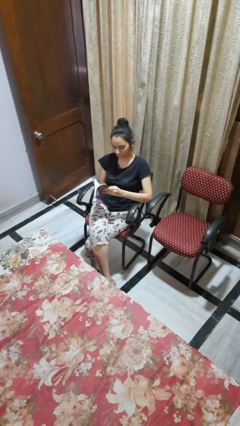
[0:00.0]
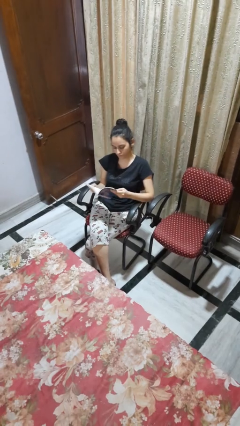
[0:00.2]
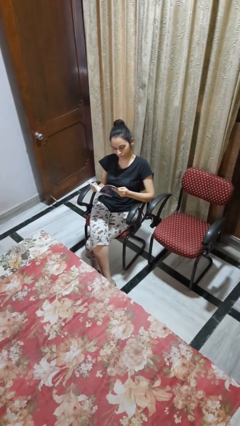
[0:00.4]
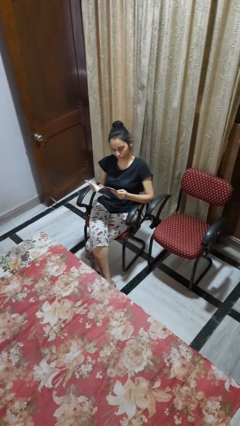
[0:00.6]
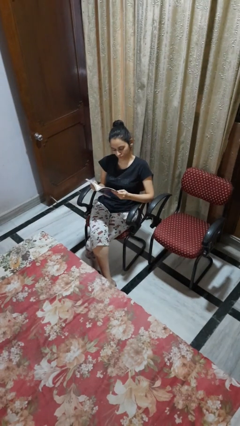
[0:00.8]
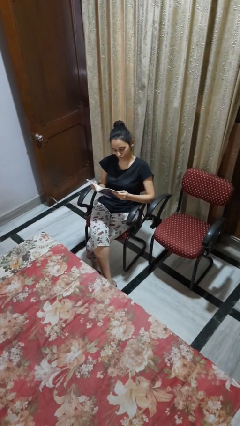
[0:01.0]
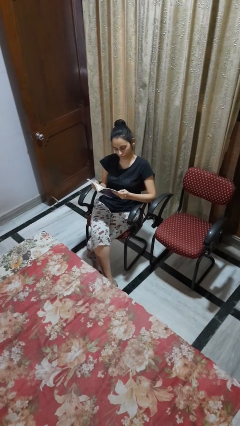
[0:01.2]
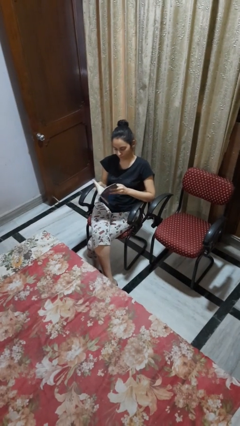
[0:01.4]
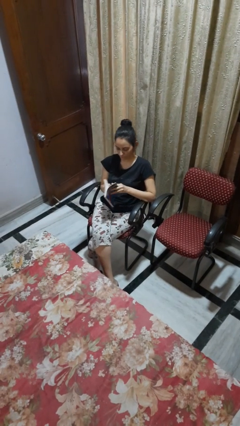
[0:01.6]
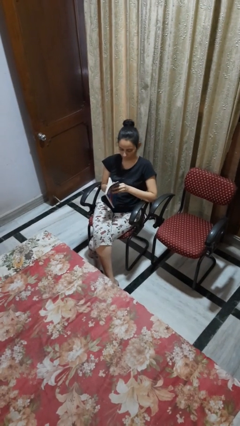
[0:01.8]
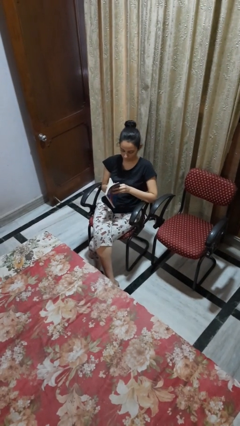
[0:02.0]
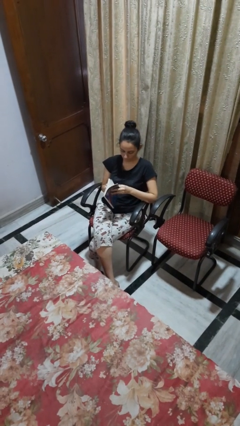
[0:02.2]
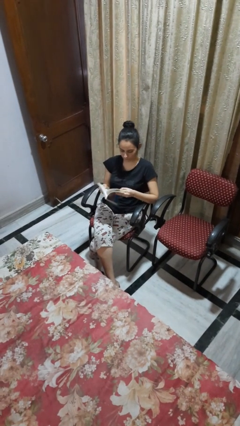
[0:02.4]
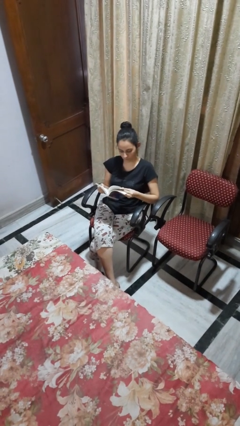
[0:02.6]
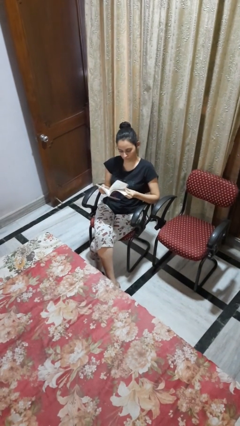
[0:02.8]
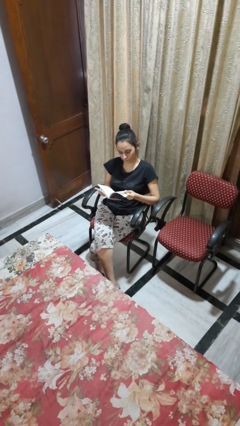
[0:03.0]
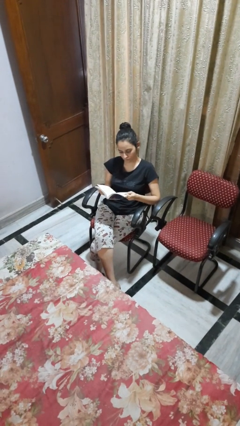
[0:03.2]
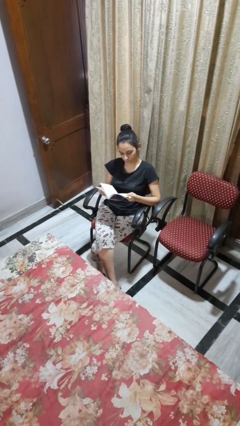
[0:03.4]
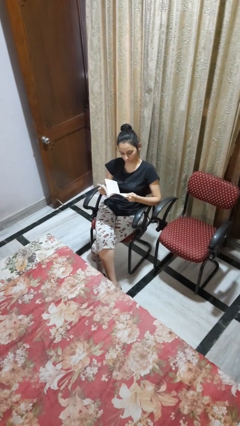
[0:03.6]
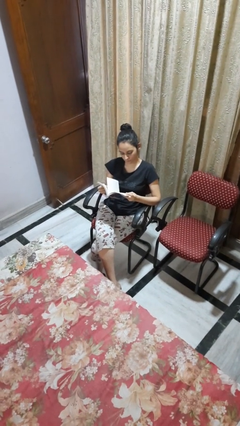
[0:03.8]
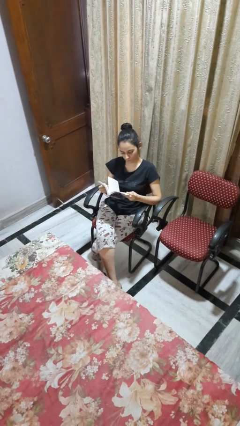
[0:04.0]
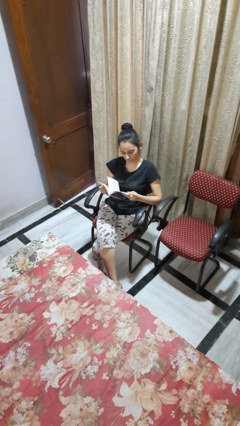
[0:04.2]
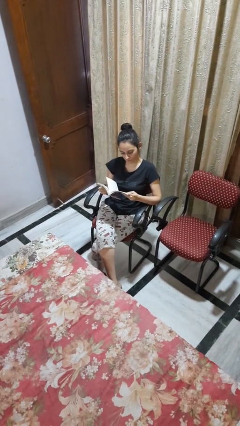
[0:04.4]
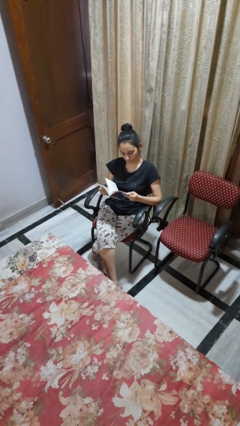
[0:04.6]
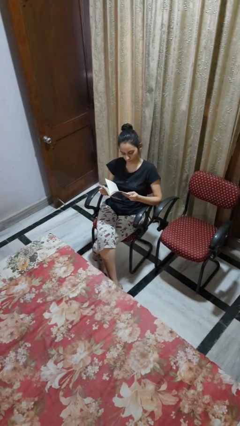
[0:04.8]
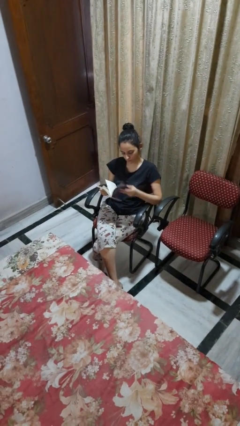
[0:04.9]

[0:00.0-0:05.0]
person reads book

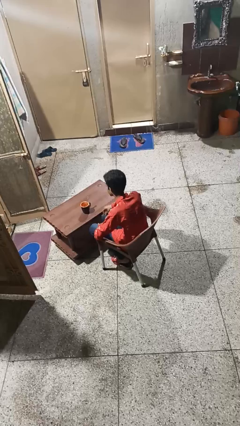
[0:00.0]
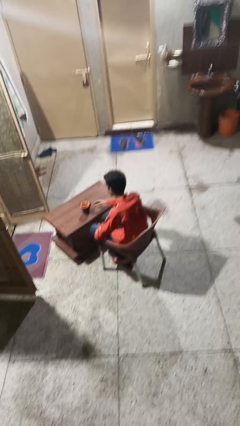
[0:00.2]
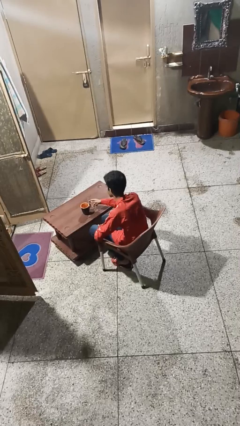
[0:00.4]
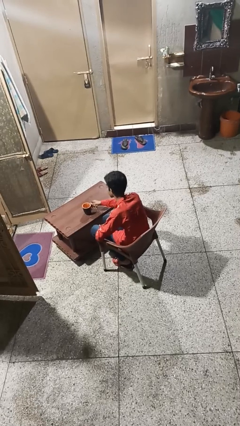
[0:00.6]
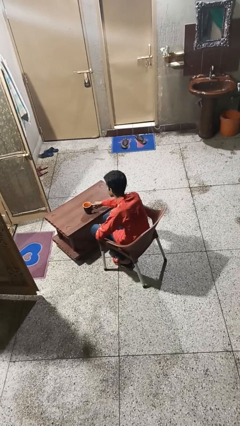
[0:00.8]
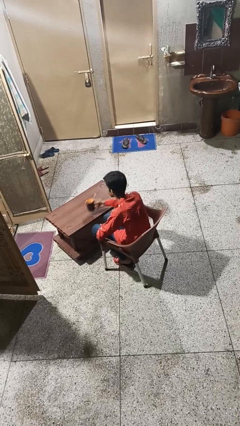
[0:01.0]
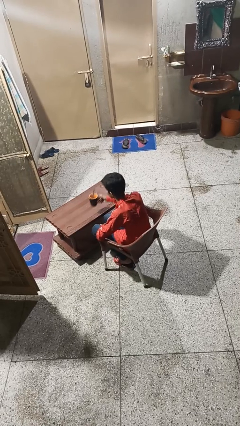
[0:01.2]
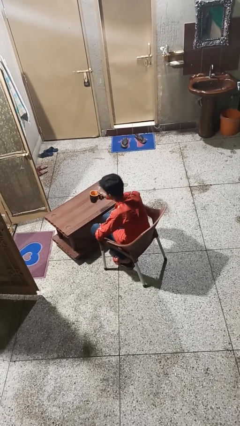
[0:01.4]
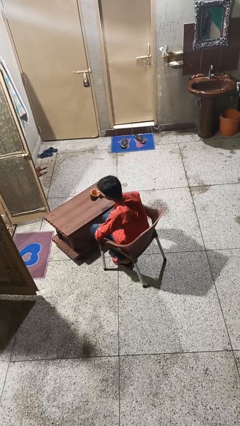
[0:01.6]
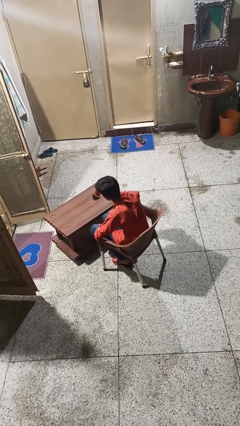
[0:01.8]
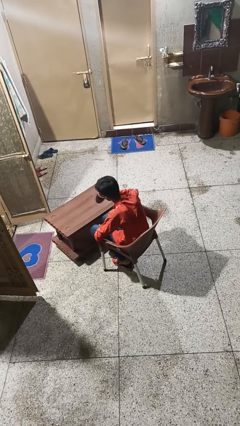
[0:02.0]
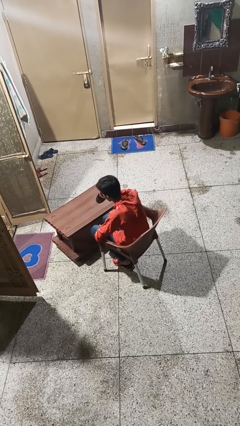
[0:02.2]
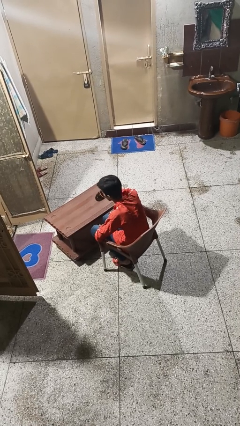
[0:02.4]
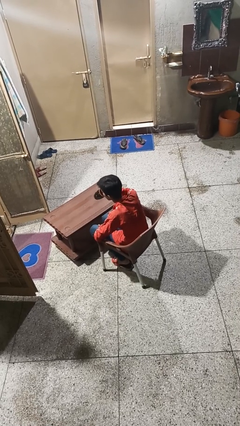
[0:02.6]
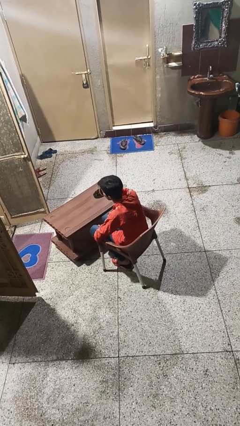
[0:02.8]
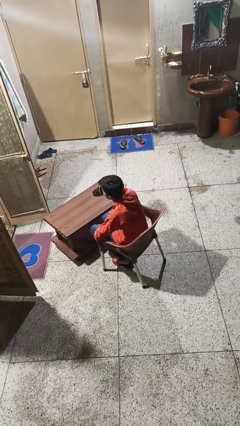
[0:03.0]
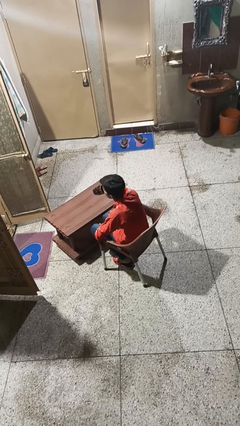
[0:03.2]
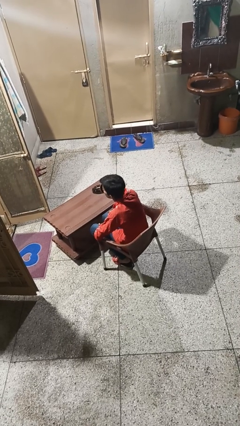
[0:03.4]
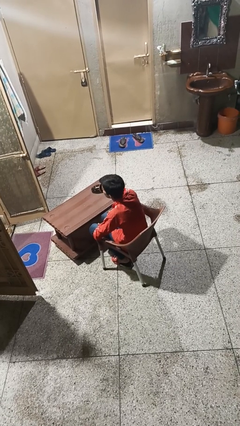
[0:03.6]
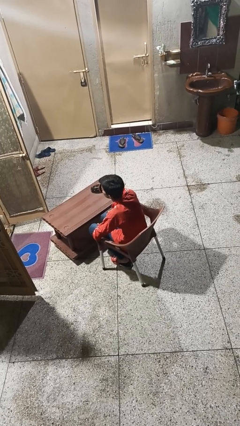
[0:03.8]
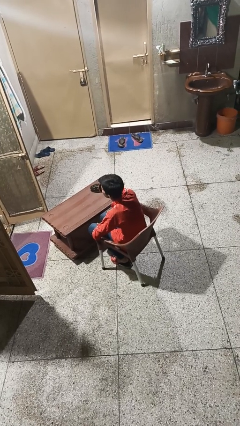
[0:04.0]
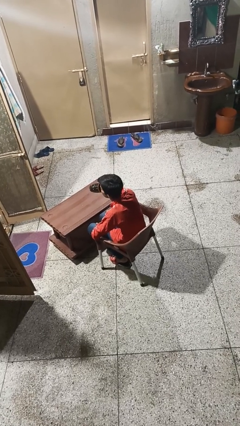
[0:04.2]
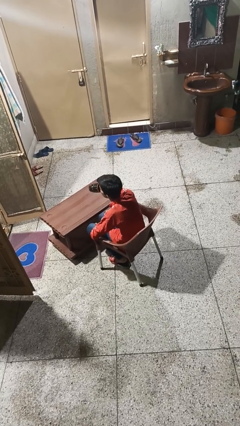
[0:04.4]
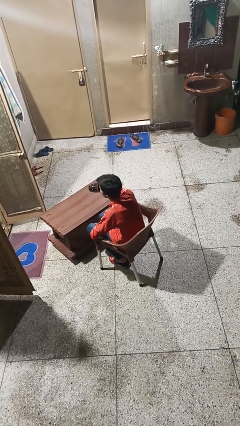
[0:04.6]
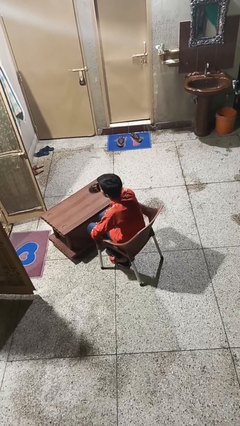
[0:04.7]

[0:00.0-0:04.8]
person drinks from mug

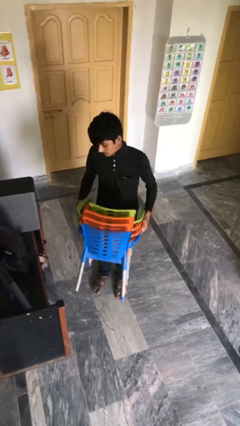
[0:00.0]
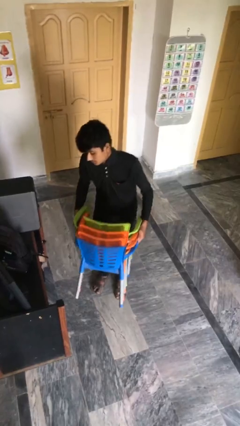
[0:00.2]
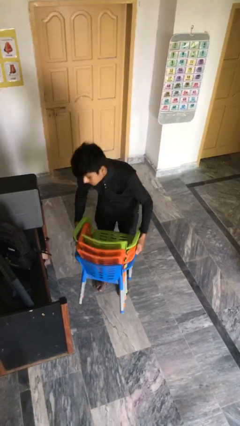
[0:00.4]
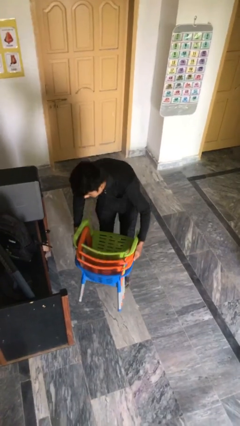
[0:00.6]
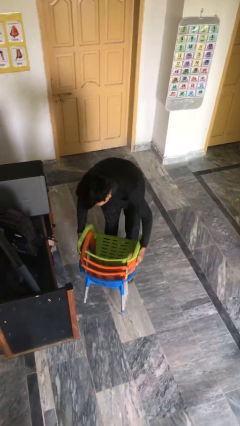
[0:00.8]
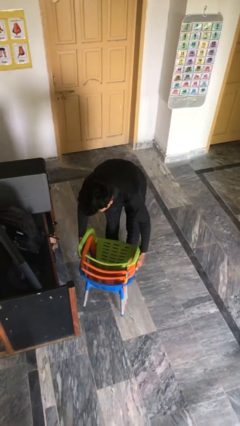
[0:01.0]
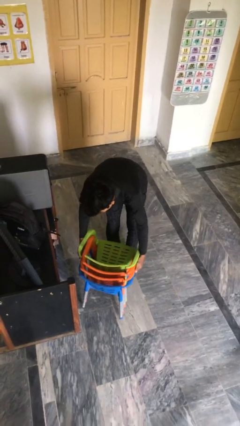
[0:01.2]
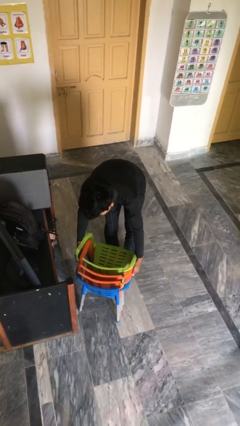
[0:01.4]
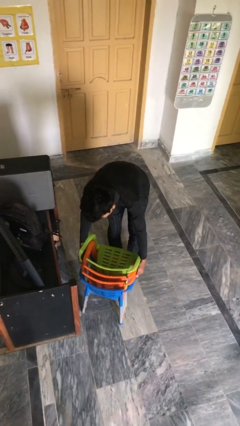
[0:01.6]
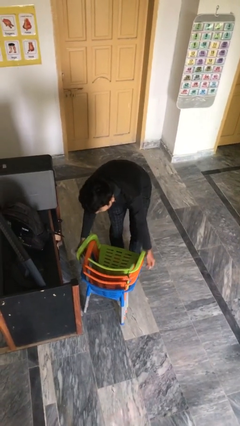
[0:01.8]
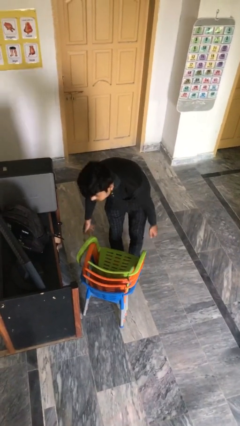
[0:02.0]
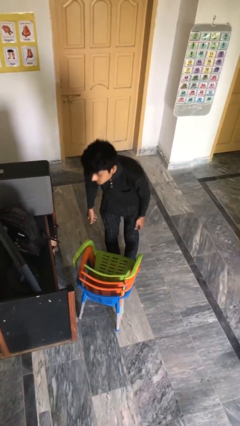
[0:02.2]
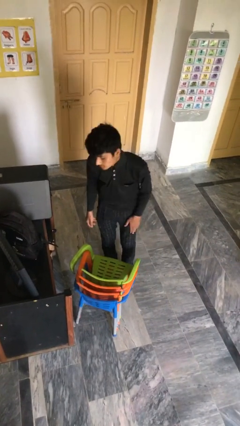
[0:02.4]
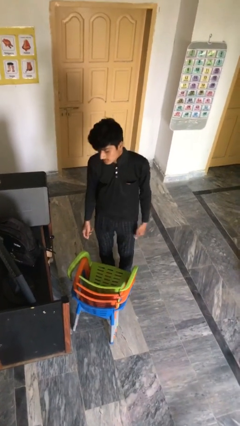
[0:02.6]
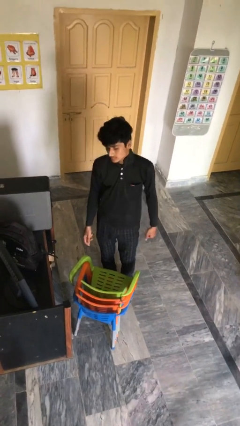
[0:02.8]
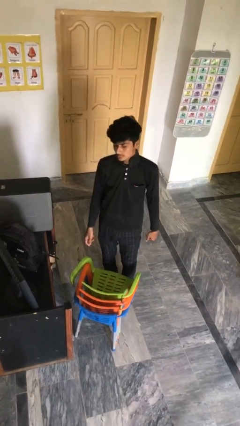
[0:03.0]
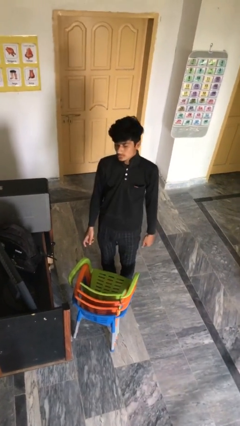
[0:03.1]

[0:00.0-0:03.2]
person puts down object on floor

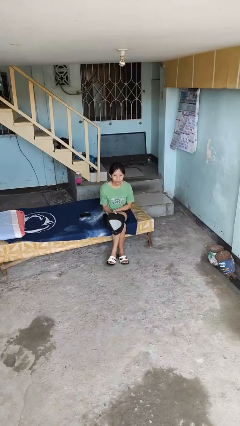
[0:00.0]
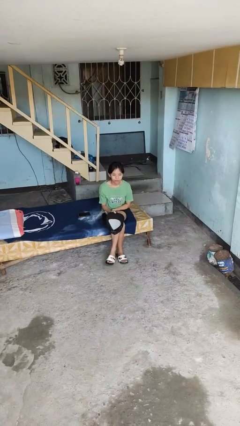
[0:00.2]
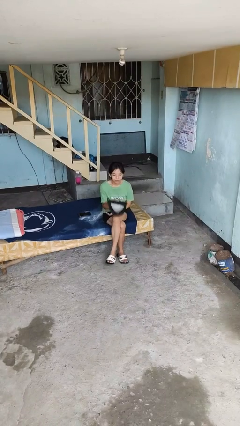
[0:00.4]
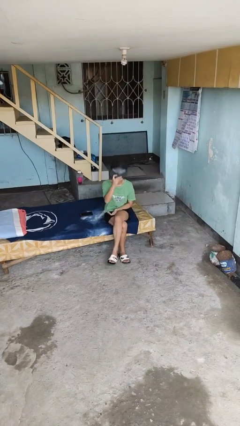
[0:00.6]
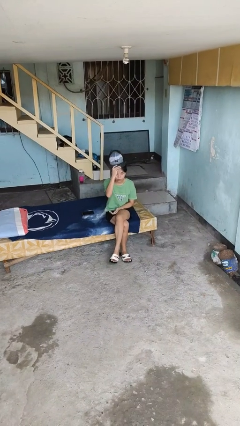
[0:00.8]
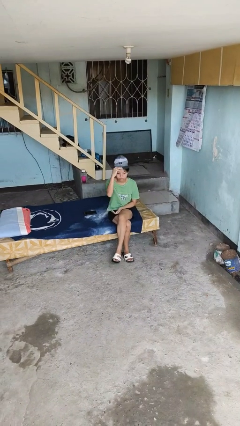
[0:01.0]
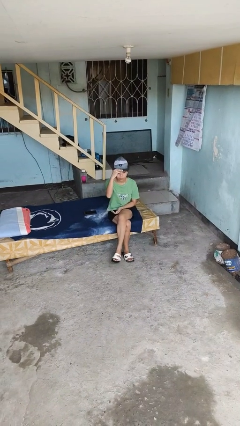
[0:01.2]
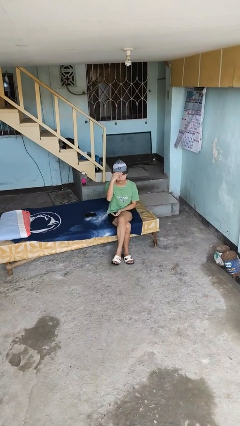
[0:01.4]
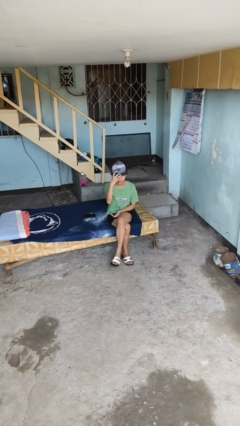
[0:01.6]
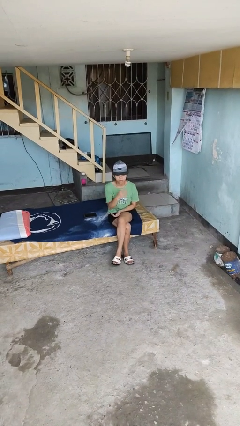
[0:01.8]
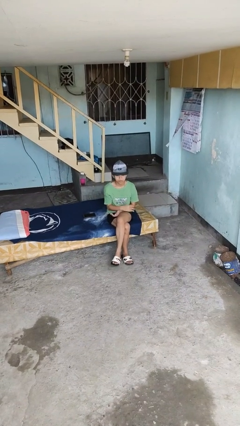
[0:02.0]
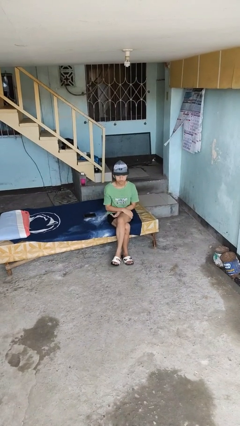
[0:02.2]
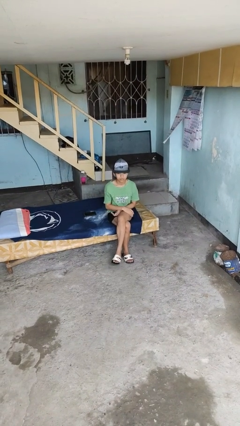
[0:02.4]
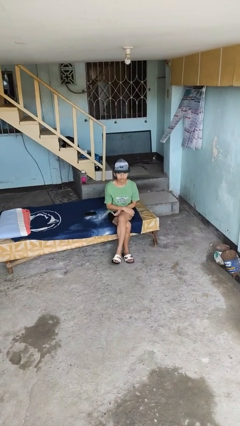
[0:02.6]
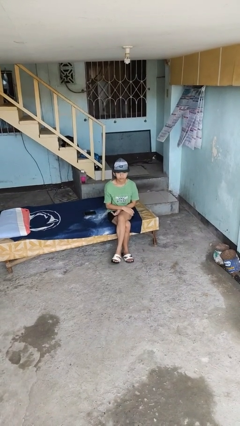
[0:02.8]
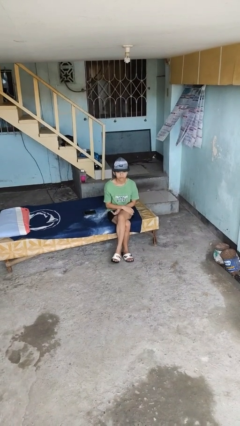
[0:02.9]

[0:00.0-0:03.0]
person puts on hat

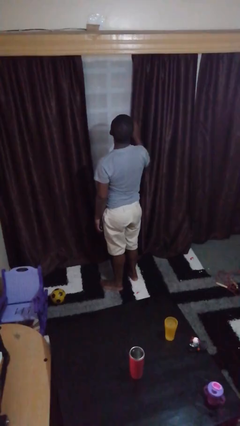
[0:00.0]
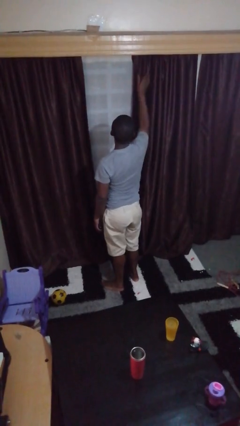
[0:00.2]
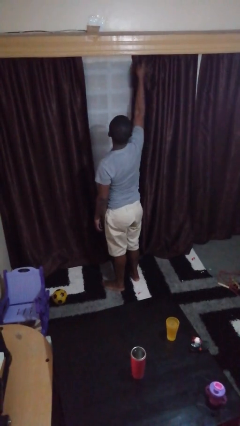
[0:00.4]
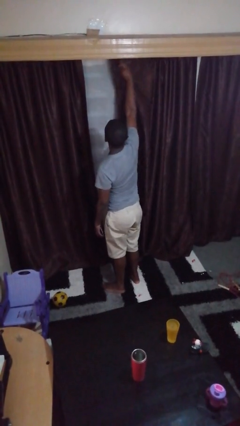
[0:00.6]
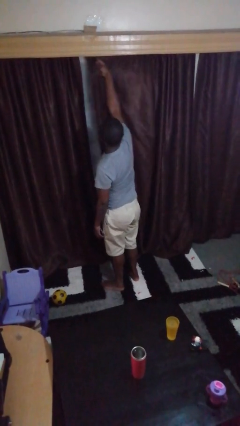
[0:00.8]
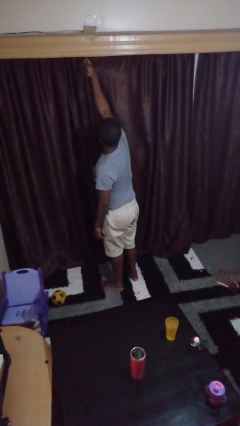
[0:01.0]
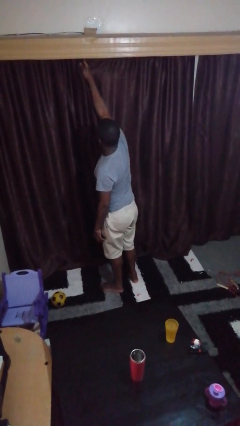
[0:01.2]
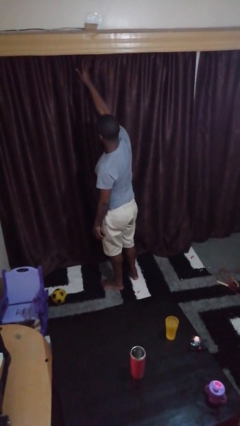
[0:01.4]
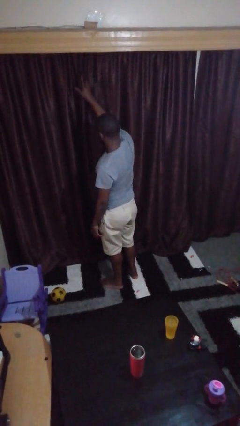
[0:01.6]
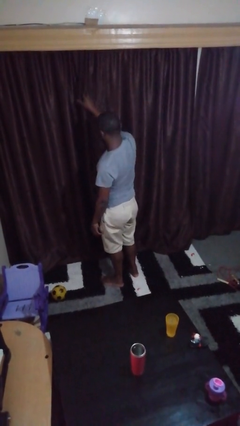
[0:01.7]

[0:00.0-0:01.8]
person closes curtains
